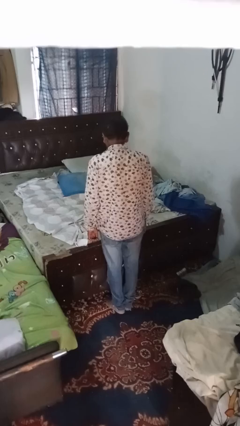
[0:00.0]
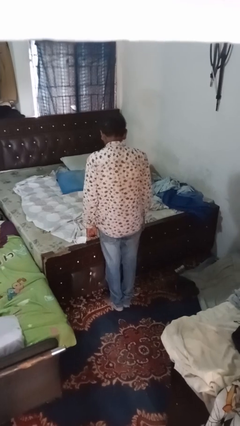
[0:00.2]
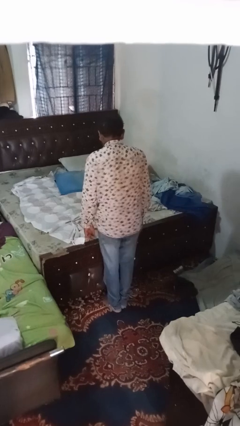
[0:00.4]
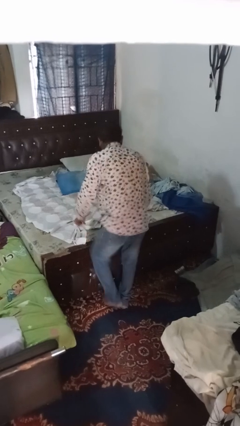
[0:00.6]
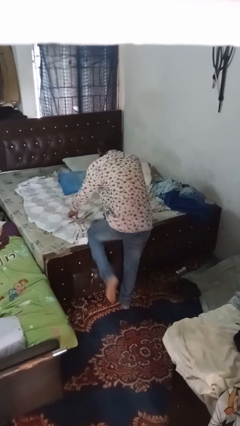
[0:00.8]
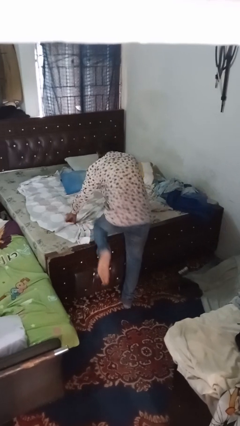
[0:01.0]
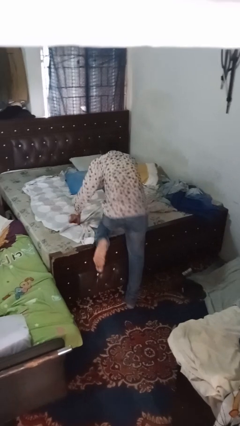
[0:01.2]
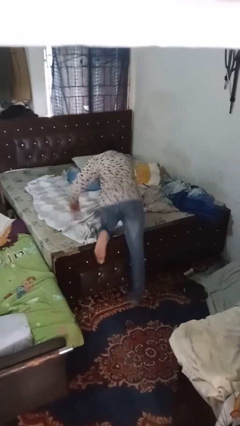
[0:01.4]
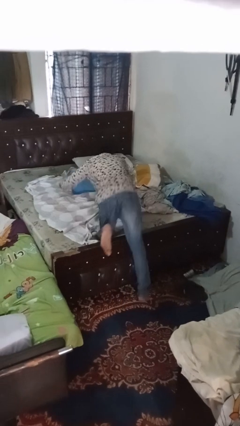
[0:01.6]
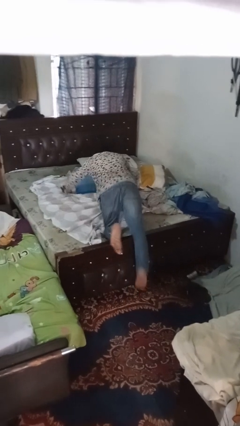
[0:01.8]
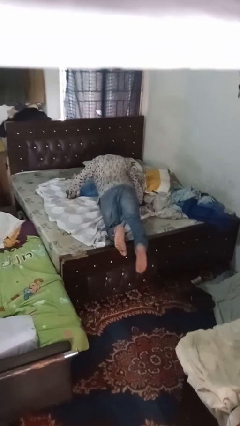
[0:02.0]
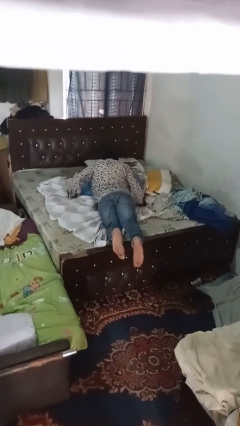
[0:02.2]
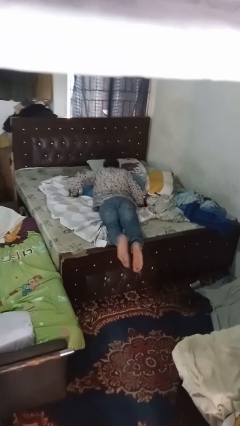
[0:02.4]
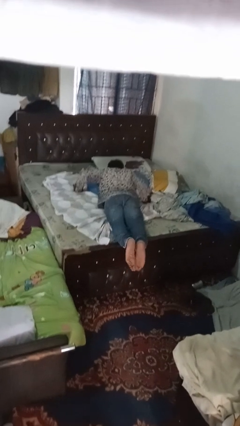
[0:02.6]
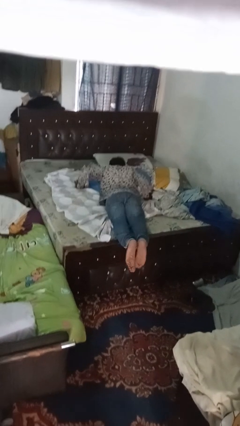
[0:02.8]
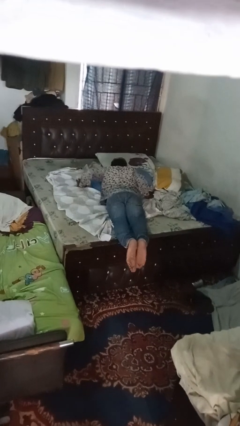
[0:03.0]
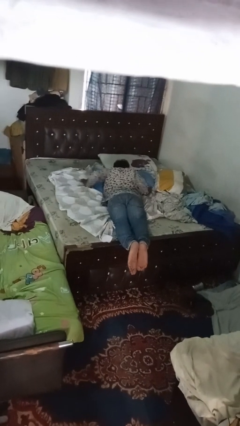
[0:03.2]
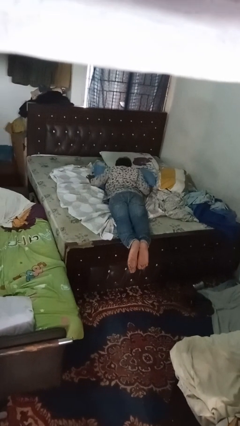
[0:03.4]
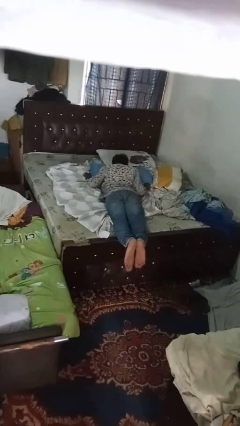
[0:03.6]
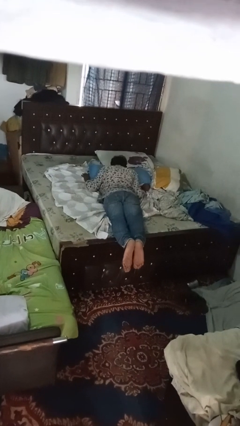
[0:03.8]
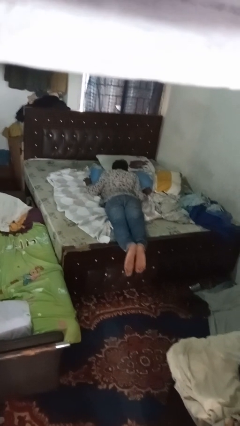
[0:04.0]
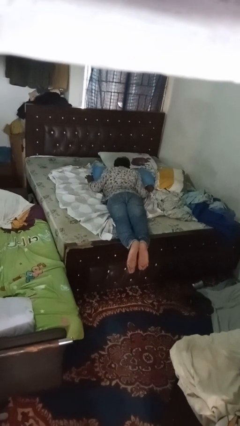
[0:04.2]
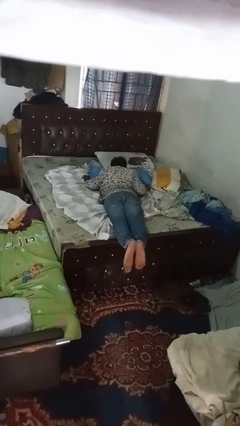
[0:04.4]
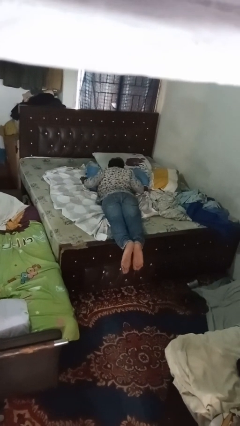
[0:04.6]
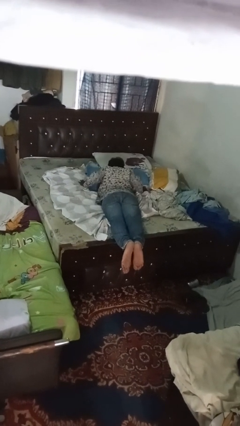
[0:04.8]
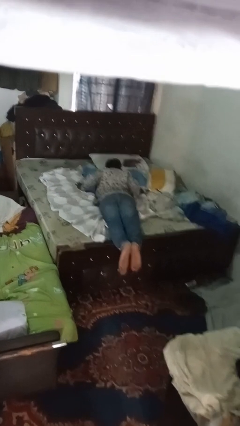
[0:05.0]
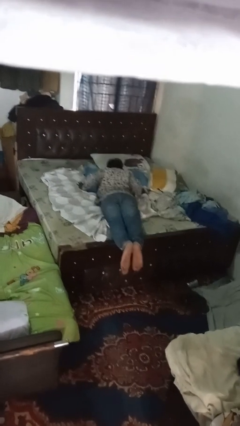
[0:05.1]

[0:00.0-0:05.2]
person lies down on bed

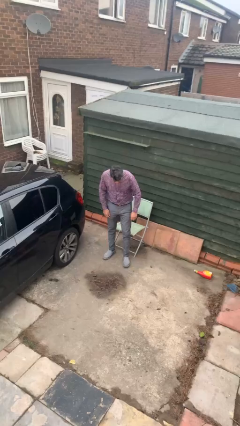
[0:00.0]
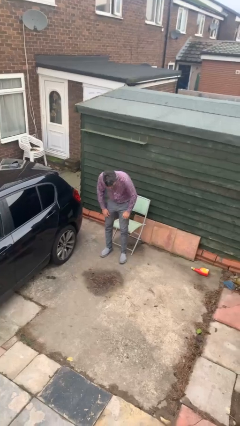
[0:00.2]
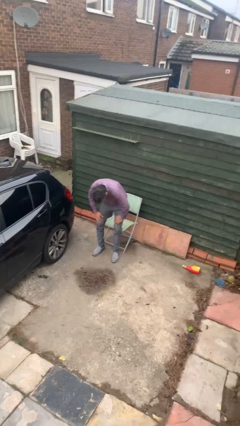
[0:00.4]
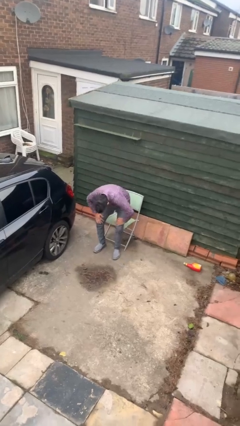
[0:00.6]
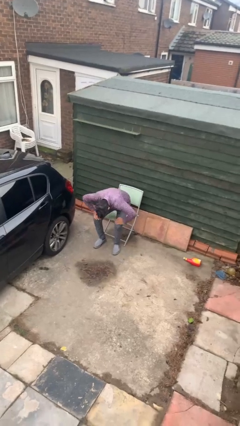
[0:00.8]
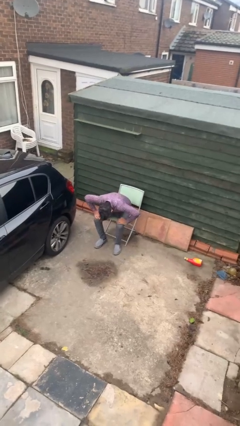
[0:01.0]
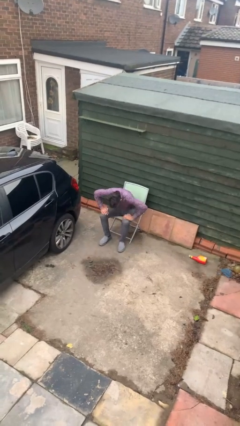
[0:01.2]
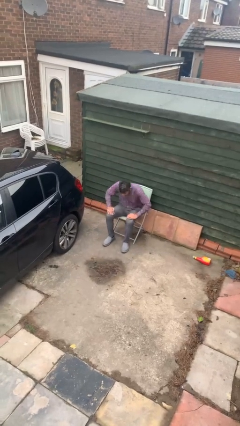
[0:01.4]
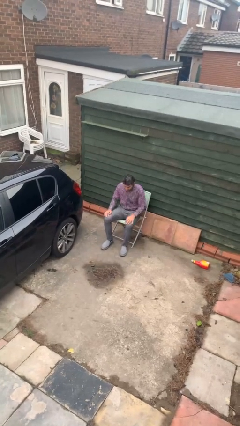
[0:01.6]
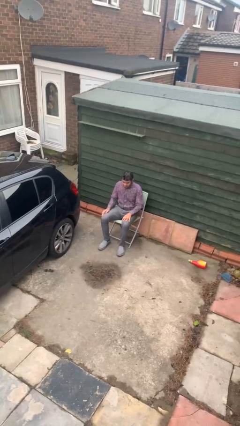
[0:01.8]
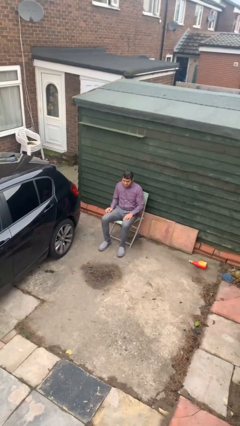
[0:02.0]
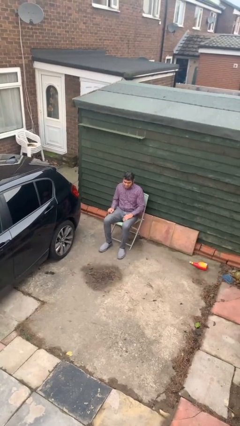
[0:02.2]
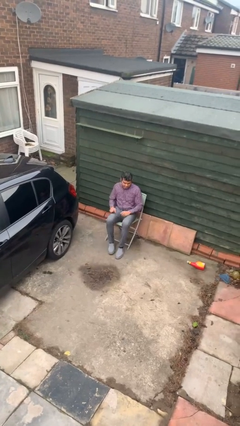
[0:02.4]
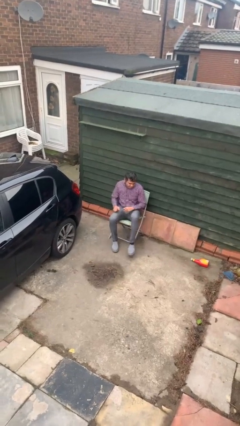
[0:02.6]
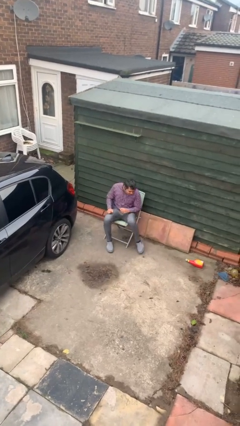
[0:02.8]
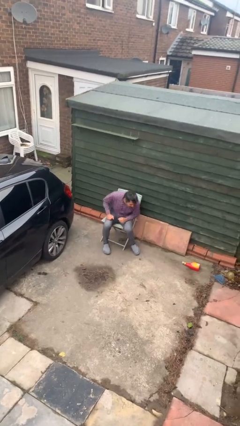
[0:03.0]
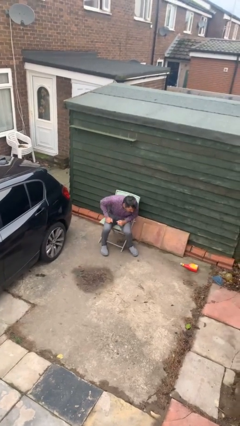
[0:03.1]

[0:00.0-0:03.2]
person sits down

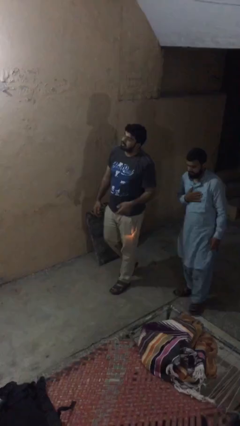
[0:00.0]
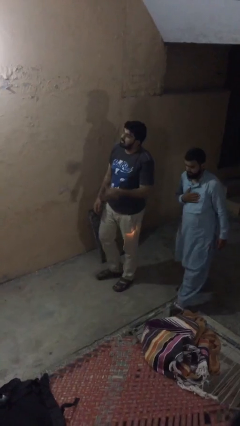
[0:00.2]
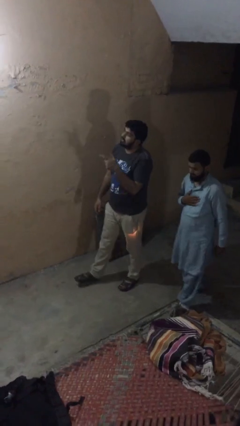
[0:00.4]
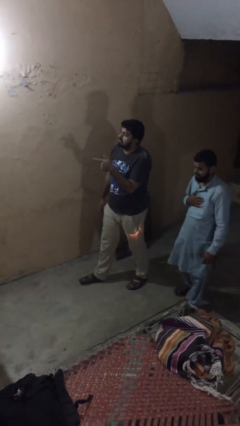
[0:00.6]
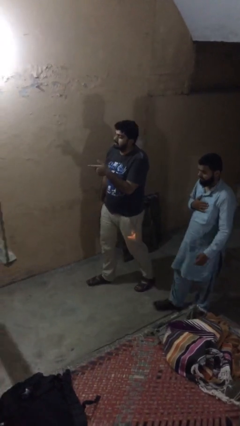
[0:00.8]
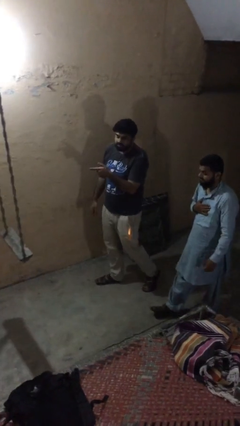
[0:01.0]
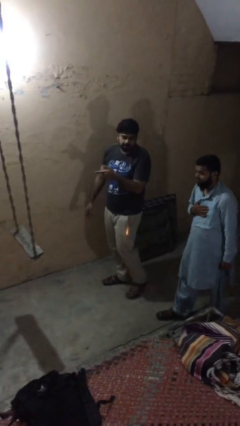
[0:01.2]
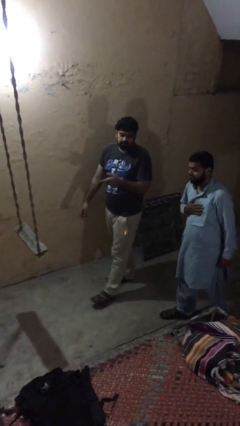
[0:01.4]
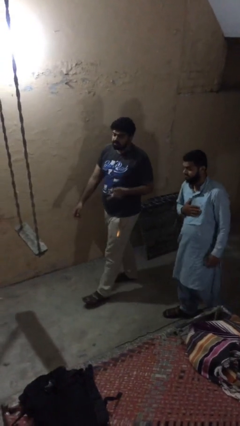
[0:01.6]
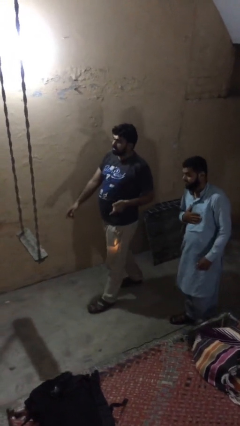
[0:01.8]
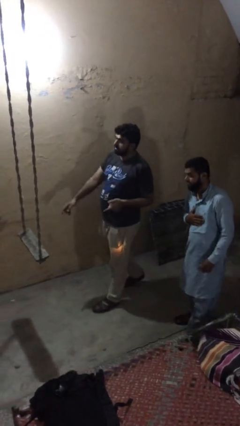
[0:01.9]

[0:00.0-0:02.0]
person talks to person

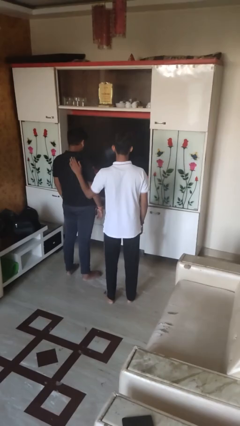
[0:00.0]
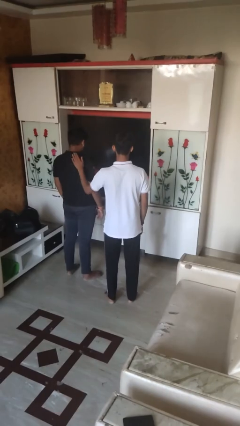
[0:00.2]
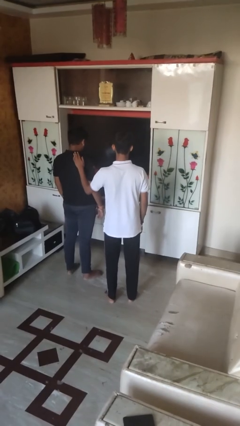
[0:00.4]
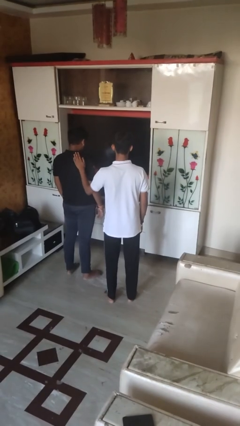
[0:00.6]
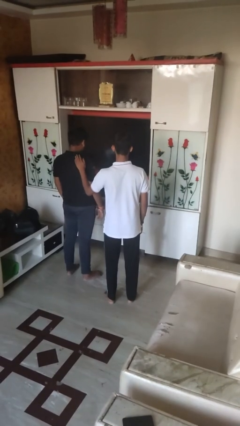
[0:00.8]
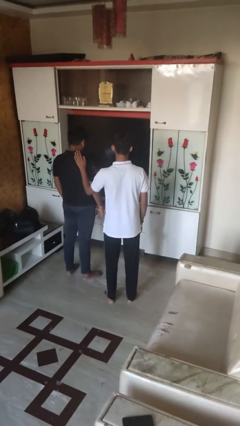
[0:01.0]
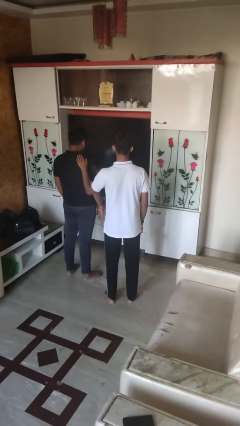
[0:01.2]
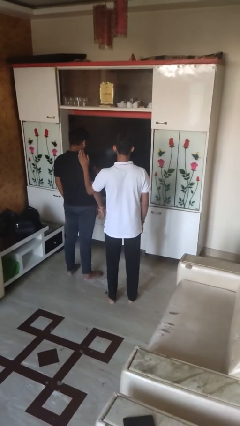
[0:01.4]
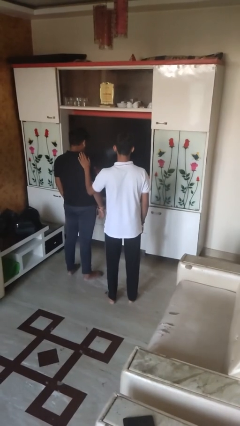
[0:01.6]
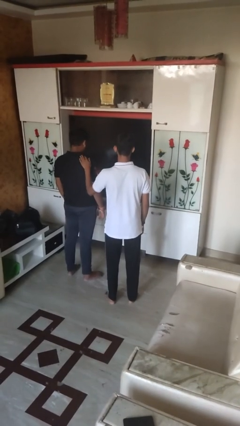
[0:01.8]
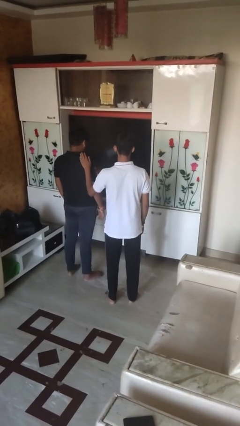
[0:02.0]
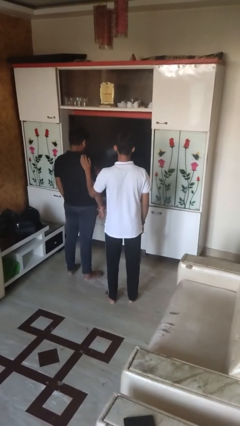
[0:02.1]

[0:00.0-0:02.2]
person pounds shoulders of person

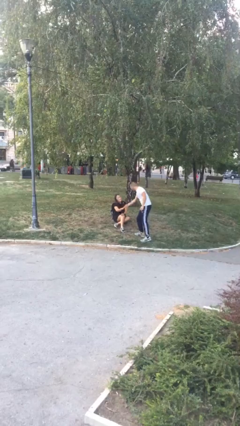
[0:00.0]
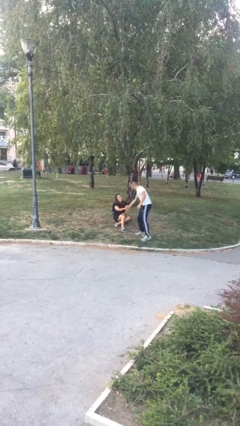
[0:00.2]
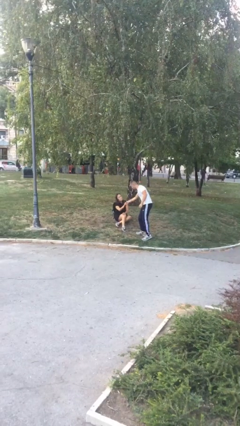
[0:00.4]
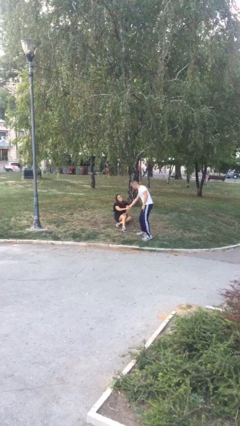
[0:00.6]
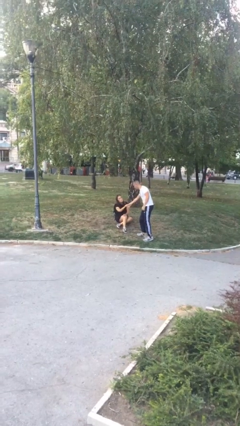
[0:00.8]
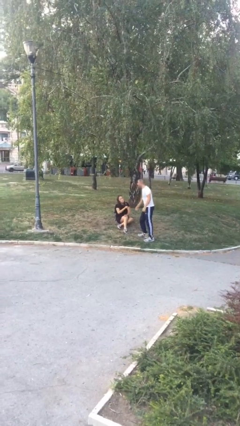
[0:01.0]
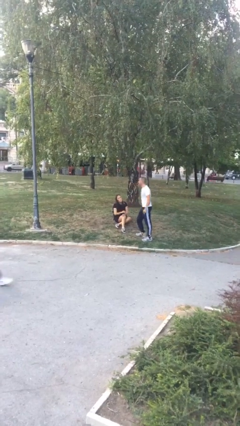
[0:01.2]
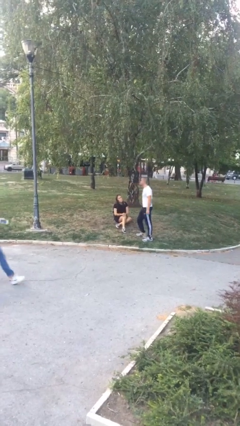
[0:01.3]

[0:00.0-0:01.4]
person shakes hand

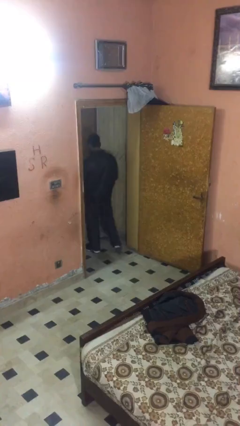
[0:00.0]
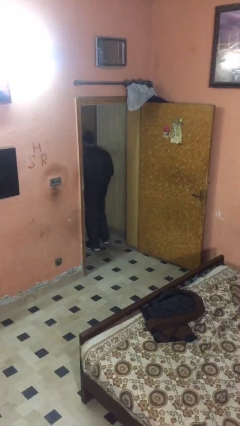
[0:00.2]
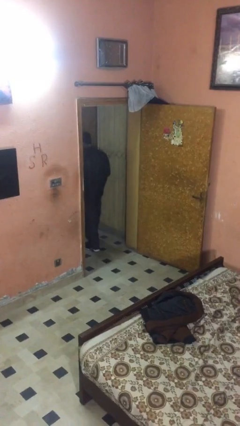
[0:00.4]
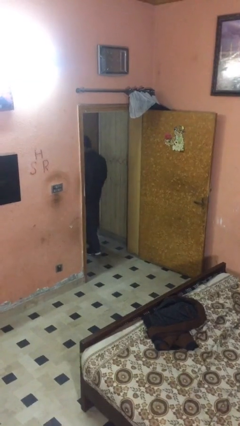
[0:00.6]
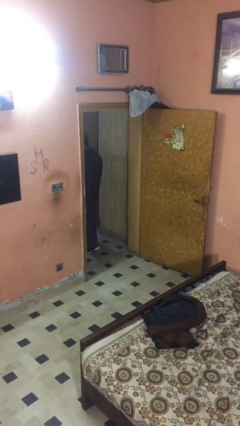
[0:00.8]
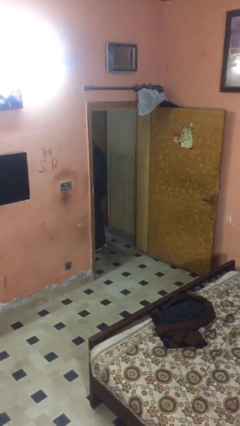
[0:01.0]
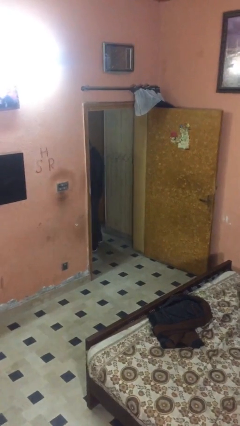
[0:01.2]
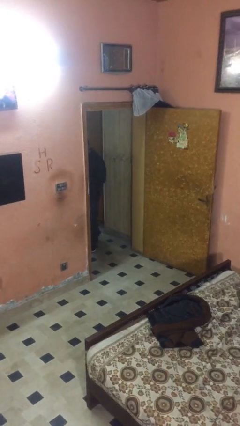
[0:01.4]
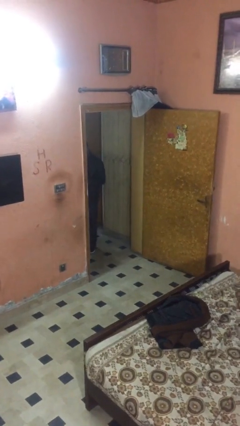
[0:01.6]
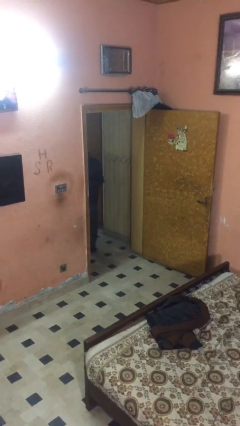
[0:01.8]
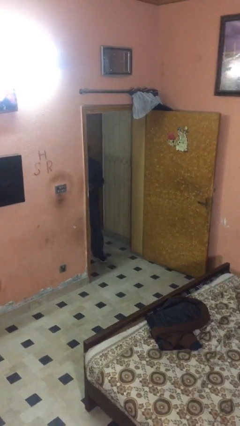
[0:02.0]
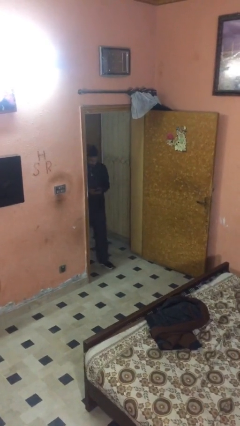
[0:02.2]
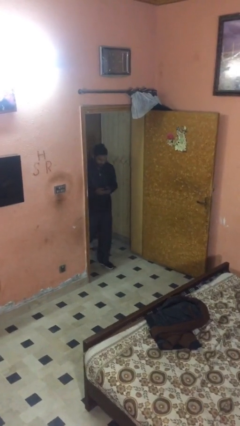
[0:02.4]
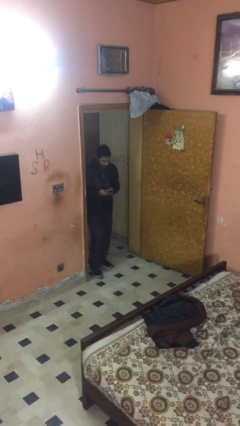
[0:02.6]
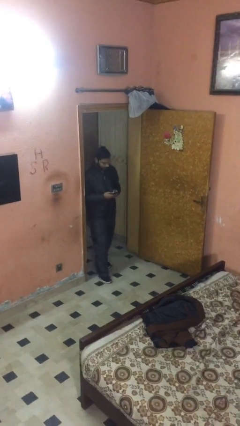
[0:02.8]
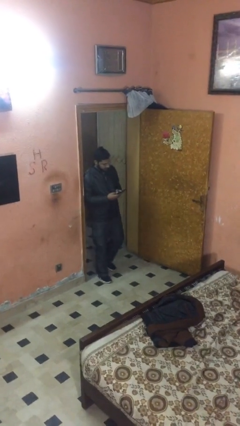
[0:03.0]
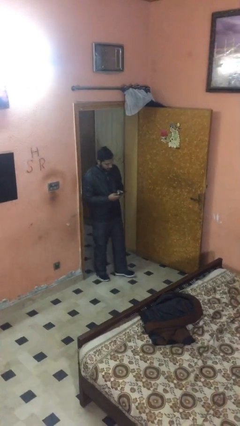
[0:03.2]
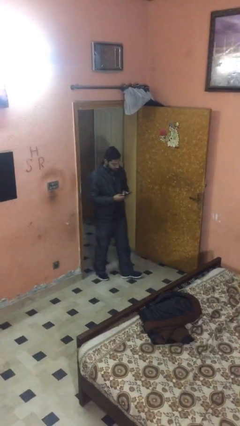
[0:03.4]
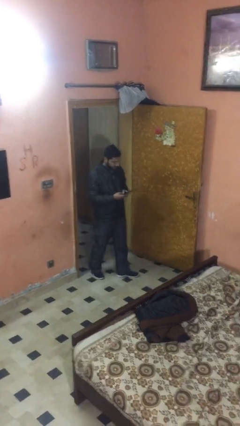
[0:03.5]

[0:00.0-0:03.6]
person enters scene through structure
